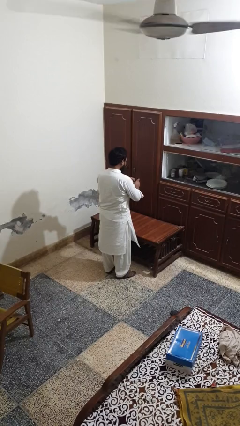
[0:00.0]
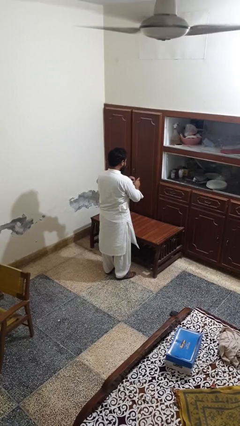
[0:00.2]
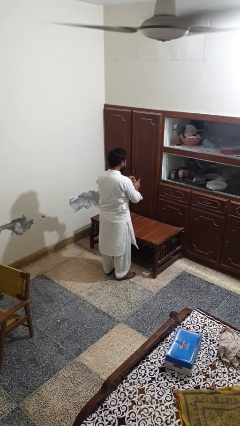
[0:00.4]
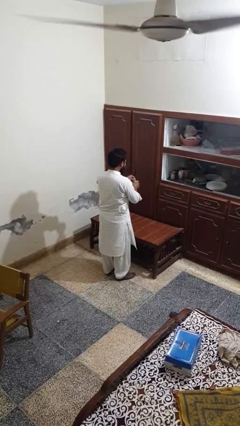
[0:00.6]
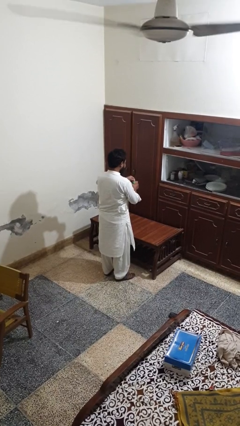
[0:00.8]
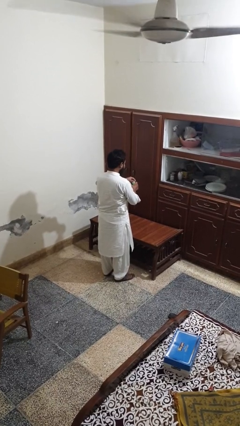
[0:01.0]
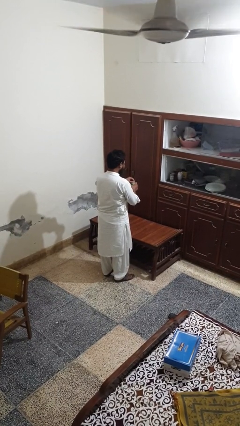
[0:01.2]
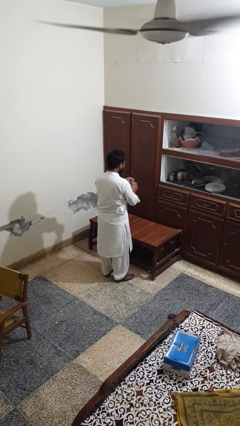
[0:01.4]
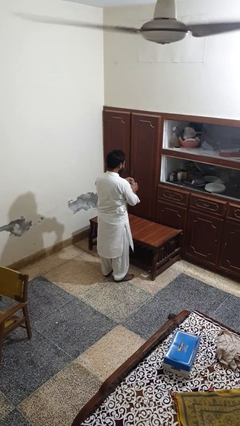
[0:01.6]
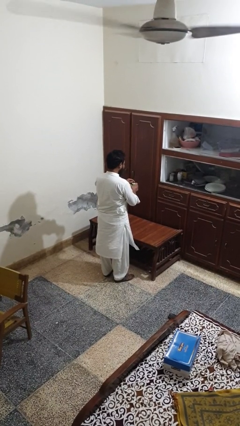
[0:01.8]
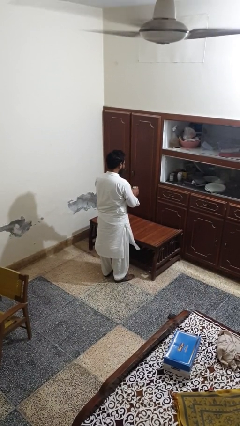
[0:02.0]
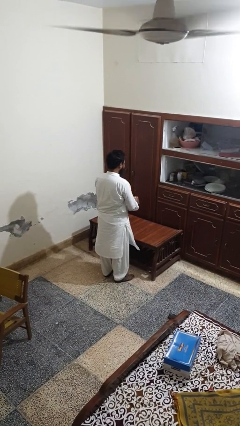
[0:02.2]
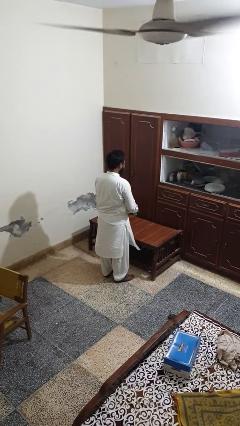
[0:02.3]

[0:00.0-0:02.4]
person opens beverage can

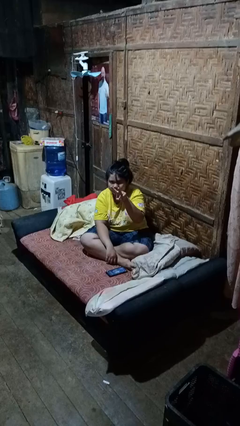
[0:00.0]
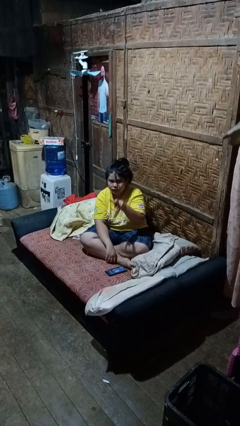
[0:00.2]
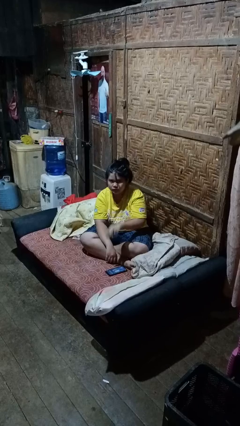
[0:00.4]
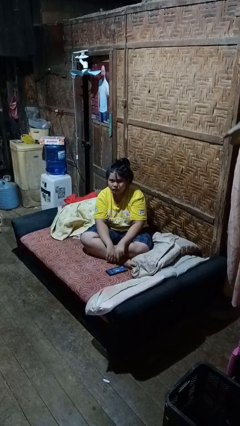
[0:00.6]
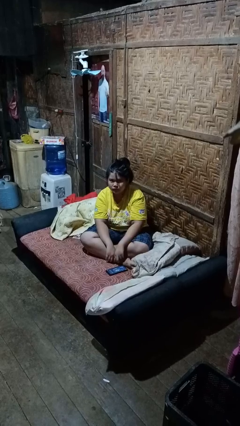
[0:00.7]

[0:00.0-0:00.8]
person gestures watch closely

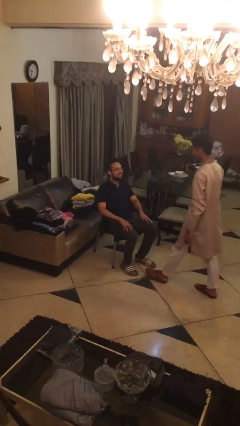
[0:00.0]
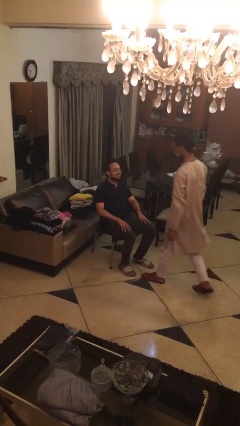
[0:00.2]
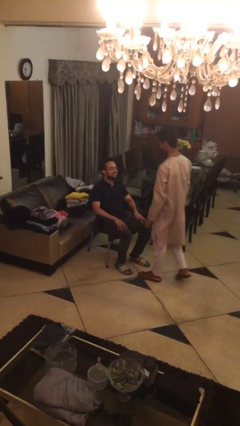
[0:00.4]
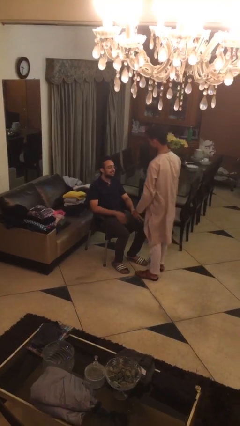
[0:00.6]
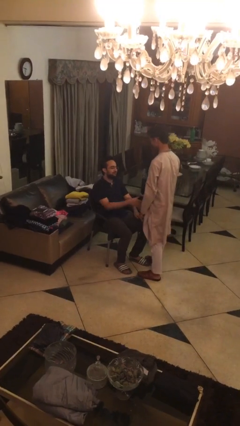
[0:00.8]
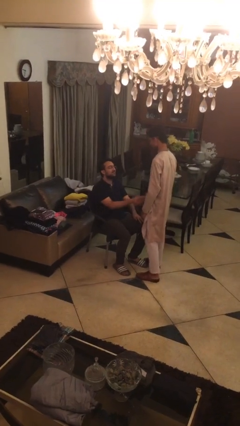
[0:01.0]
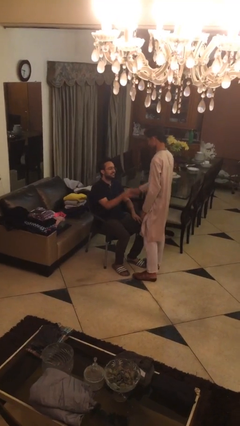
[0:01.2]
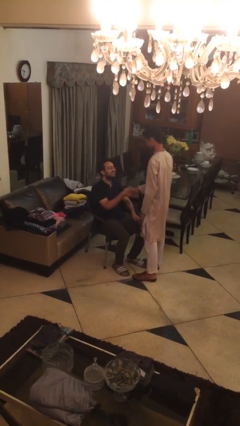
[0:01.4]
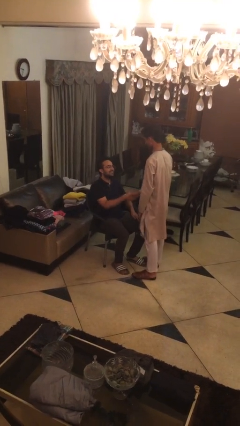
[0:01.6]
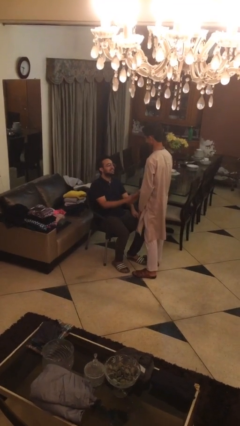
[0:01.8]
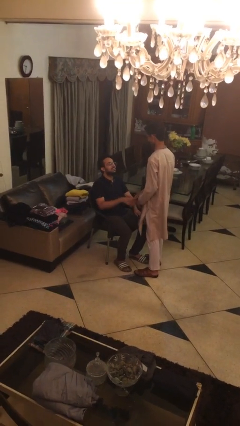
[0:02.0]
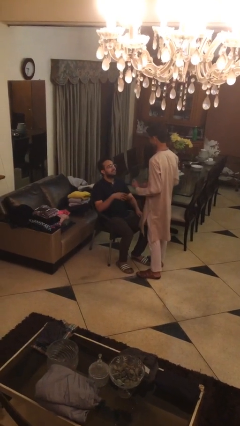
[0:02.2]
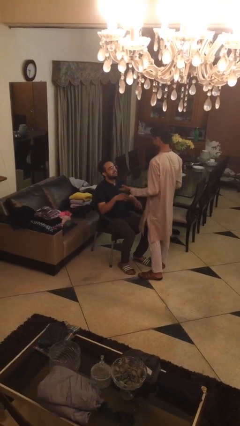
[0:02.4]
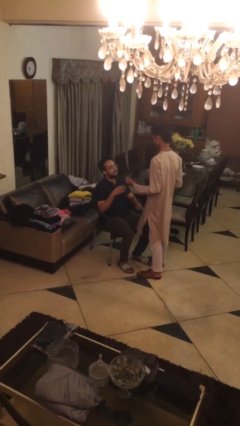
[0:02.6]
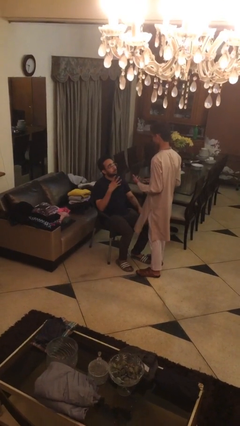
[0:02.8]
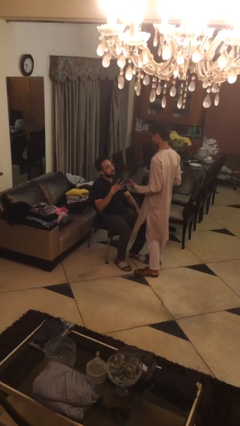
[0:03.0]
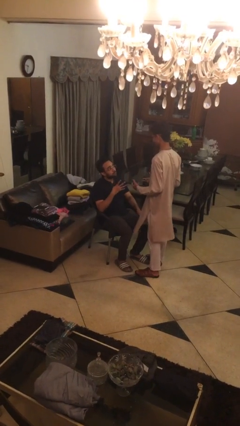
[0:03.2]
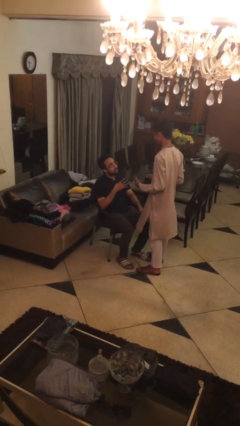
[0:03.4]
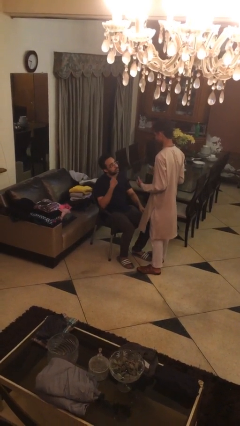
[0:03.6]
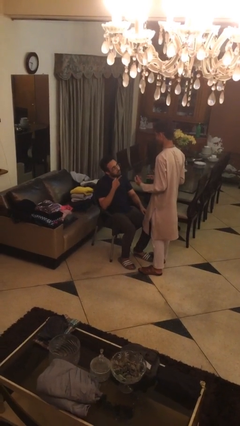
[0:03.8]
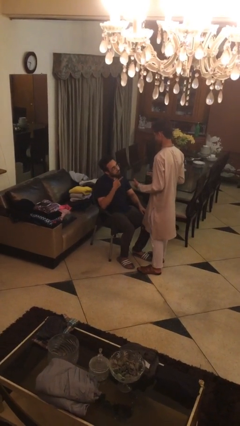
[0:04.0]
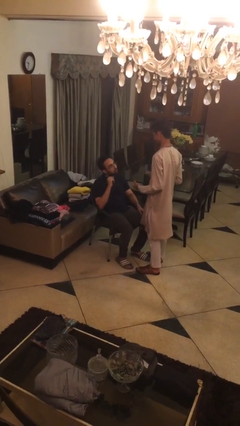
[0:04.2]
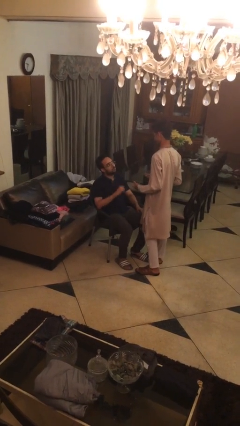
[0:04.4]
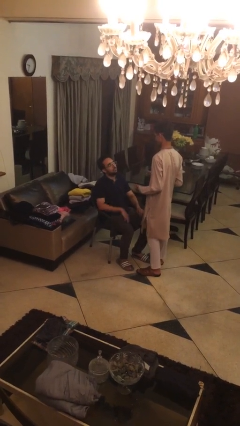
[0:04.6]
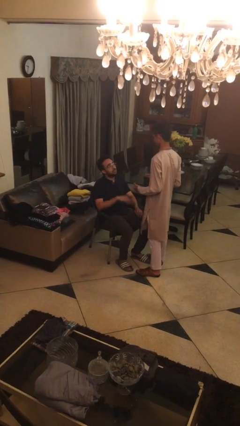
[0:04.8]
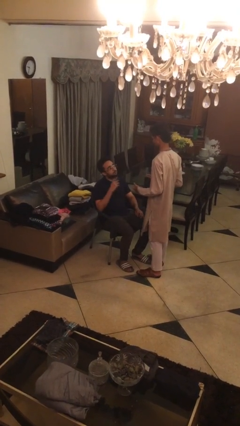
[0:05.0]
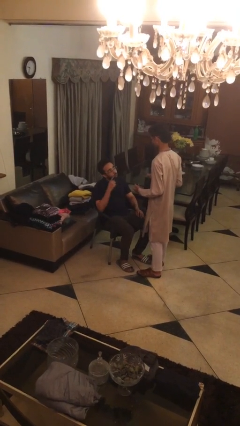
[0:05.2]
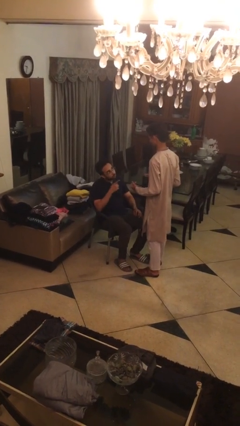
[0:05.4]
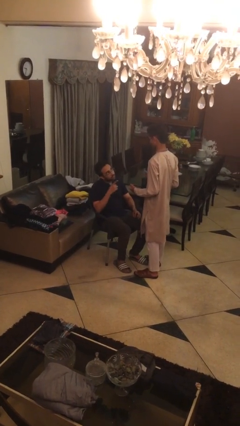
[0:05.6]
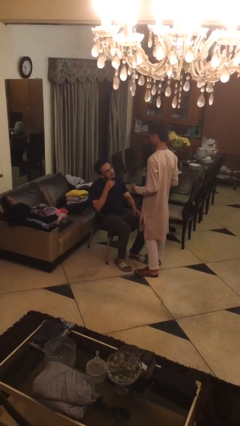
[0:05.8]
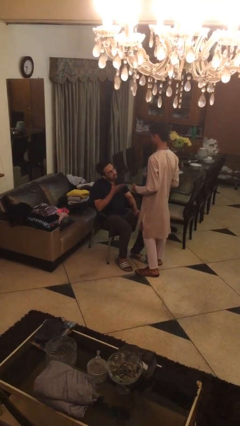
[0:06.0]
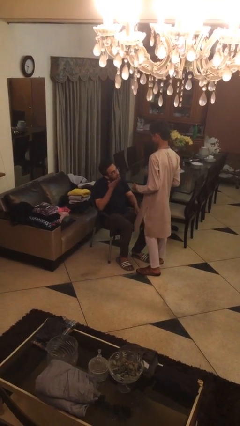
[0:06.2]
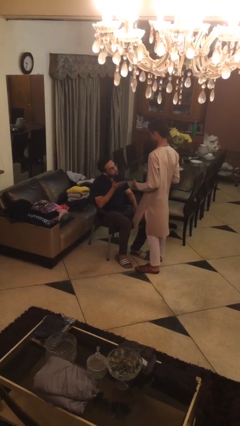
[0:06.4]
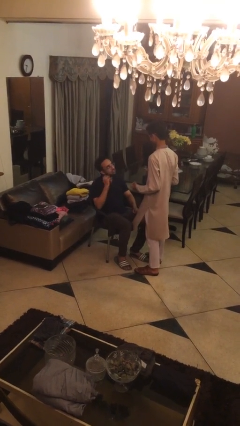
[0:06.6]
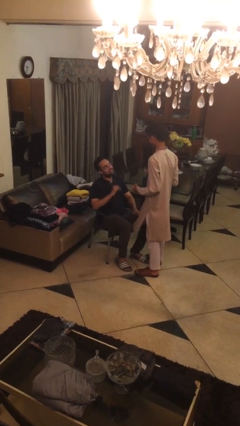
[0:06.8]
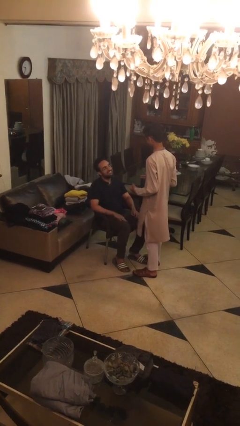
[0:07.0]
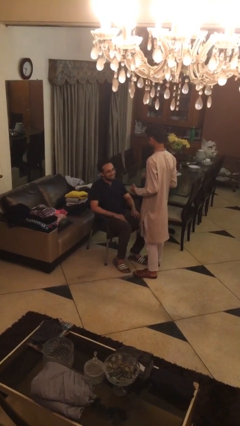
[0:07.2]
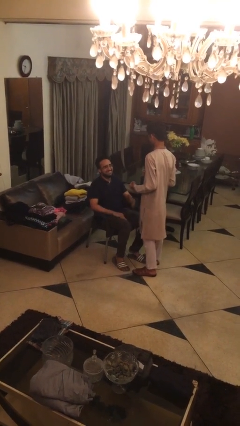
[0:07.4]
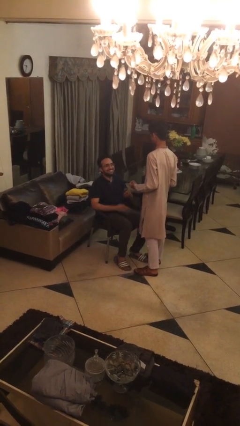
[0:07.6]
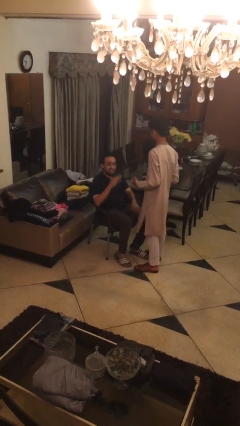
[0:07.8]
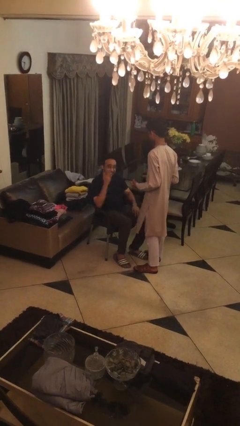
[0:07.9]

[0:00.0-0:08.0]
person shakes hand

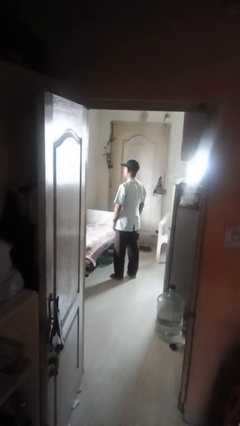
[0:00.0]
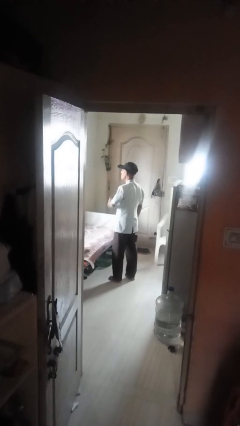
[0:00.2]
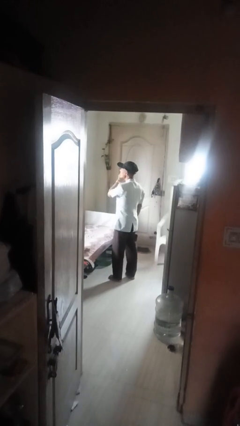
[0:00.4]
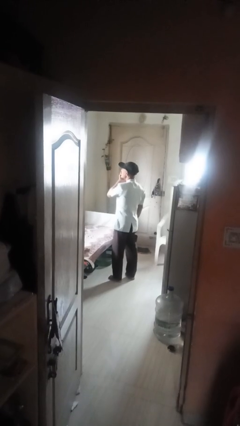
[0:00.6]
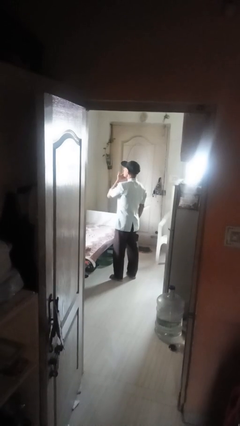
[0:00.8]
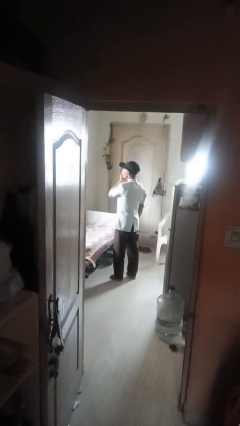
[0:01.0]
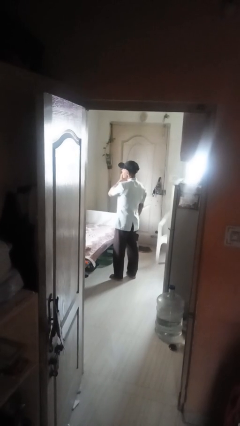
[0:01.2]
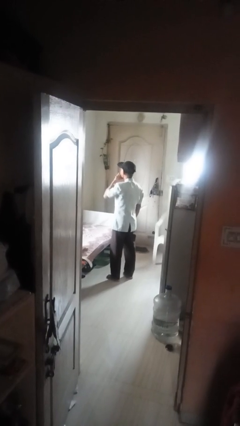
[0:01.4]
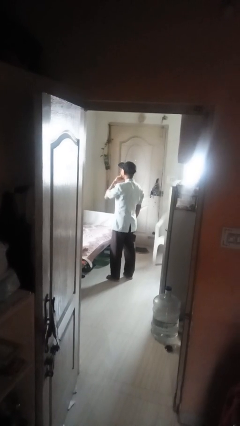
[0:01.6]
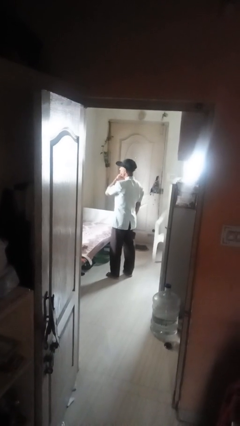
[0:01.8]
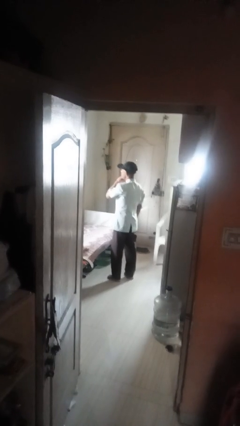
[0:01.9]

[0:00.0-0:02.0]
person strokes chin

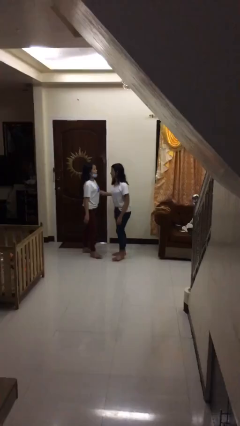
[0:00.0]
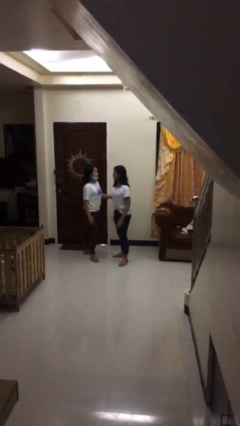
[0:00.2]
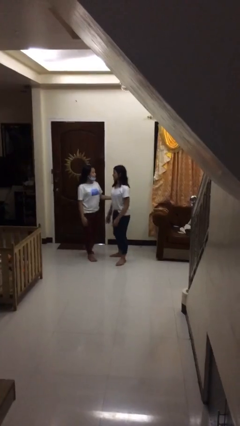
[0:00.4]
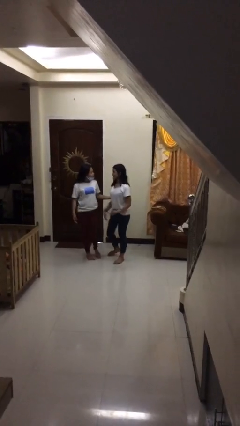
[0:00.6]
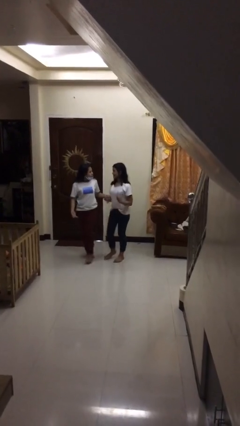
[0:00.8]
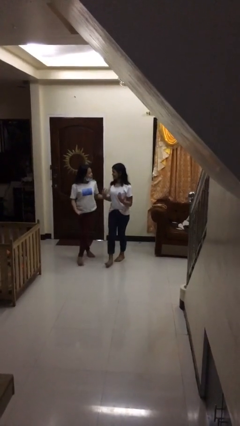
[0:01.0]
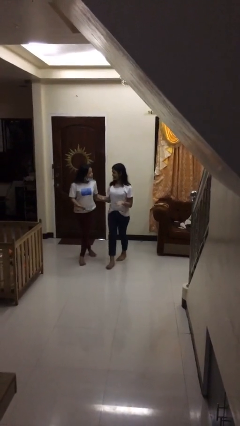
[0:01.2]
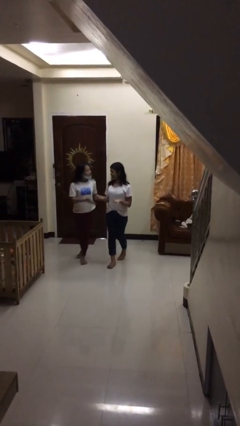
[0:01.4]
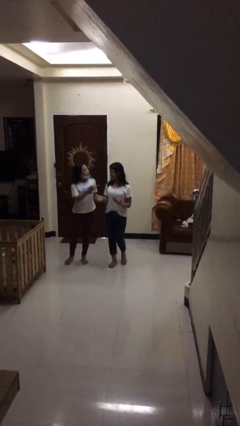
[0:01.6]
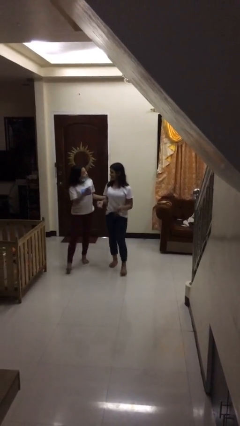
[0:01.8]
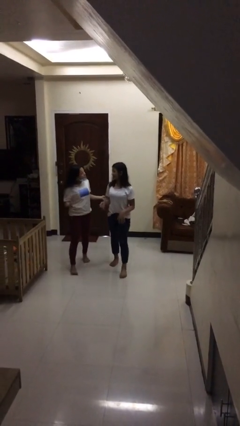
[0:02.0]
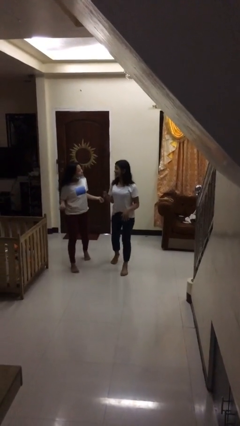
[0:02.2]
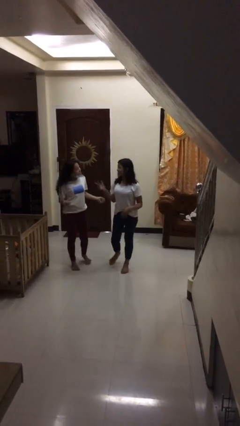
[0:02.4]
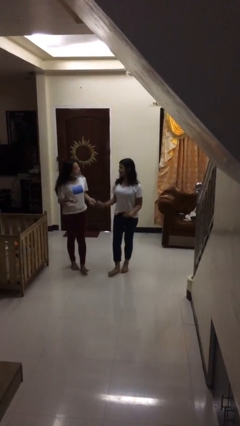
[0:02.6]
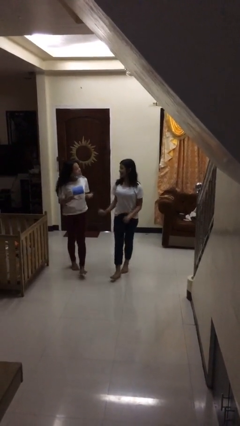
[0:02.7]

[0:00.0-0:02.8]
person talks to person

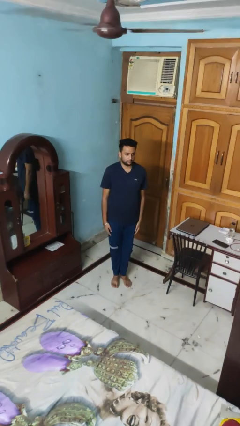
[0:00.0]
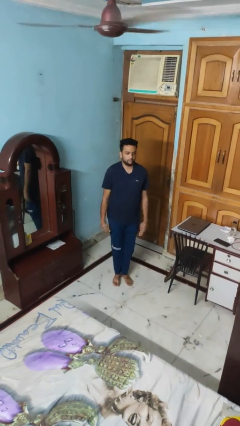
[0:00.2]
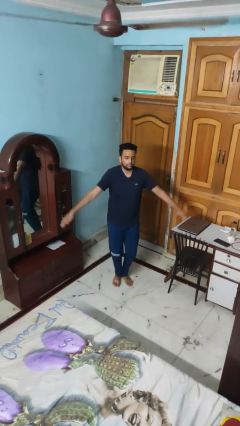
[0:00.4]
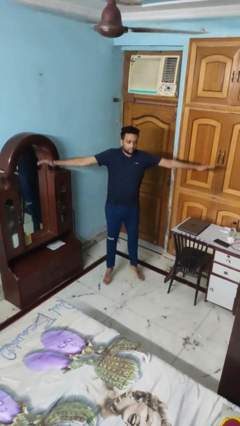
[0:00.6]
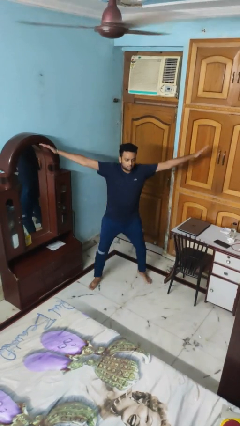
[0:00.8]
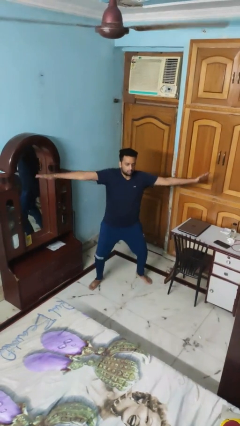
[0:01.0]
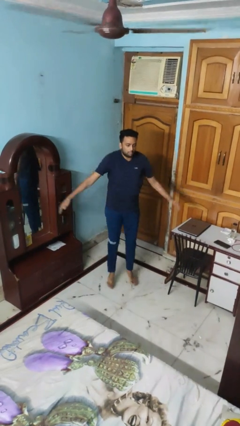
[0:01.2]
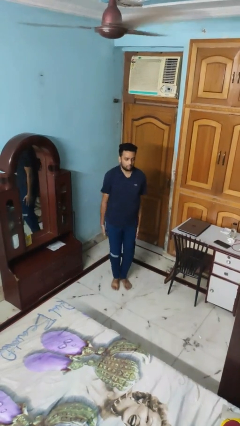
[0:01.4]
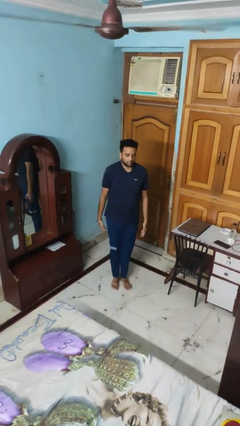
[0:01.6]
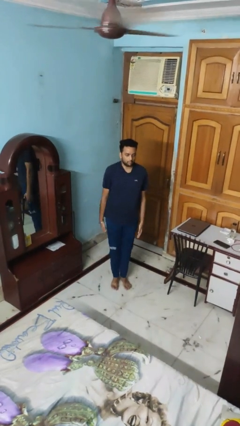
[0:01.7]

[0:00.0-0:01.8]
person exercises with jumping jacks
